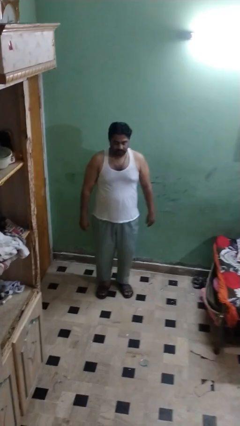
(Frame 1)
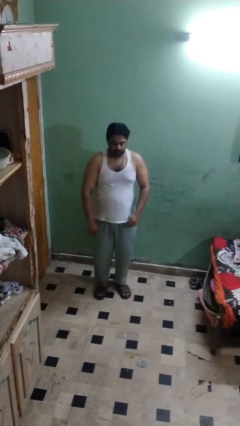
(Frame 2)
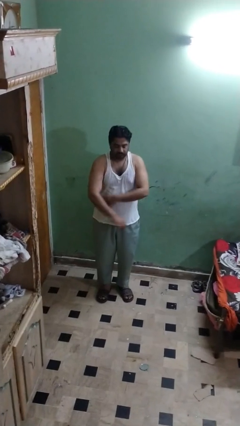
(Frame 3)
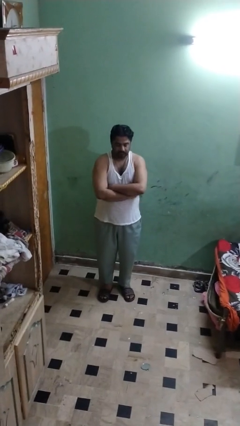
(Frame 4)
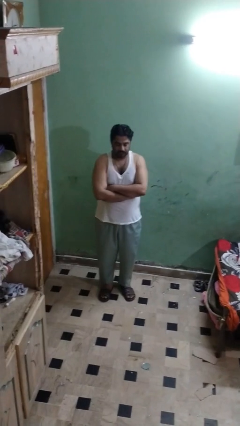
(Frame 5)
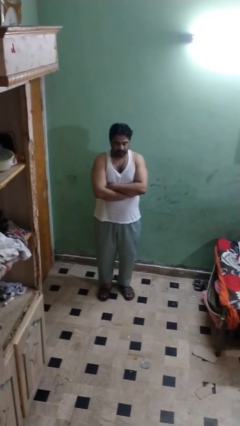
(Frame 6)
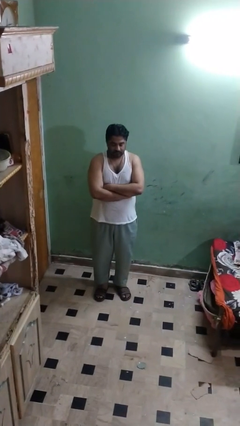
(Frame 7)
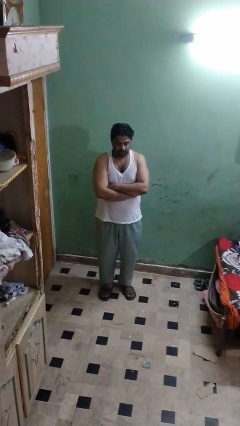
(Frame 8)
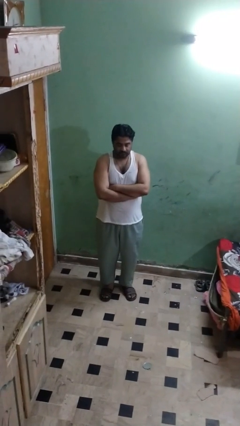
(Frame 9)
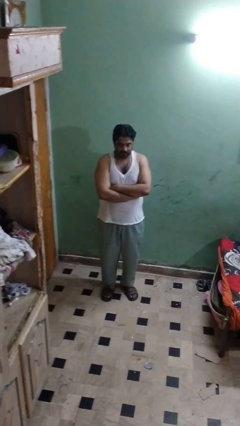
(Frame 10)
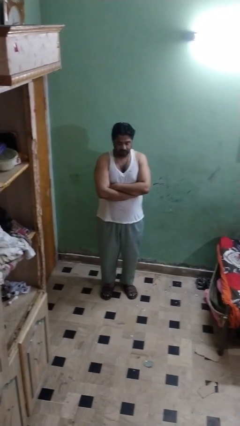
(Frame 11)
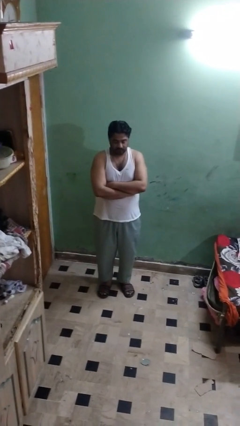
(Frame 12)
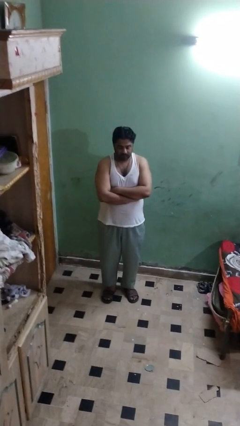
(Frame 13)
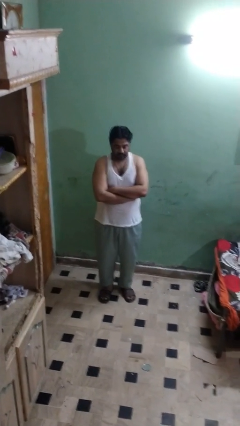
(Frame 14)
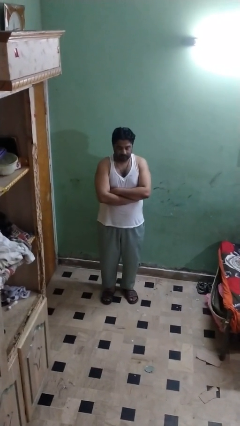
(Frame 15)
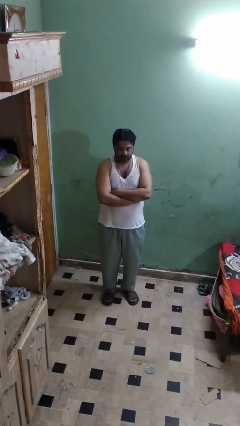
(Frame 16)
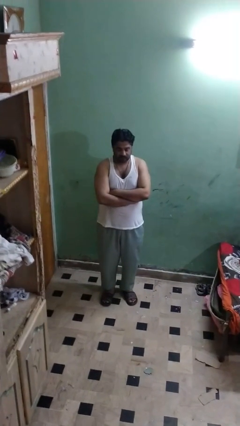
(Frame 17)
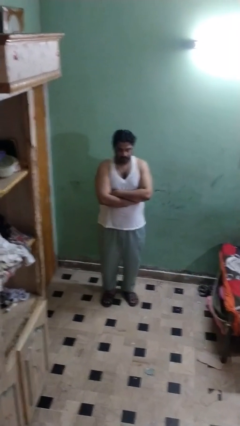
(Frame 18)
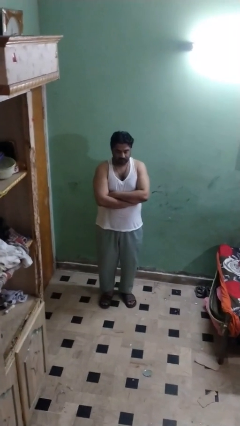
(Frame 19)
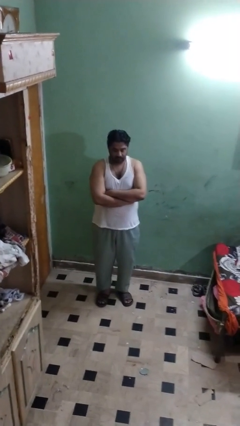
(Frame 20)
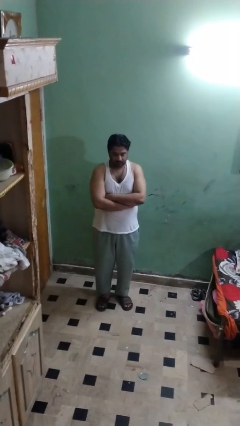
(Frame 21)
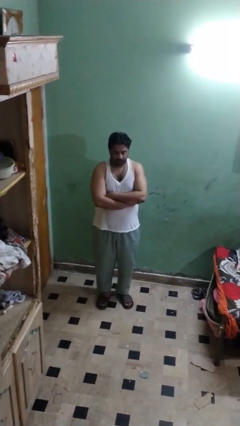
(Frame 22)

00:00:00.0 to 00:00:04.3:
person crosses arms

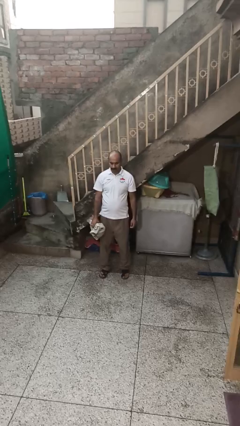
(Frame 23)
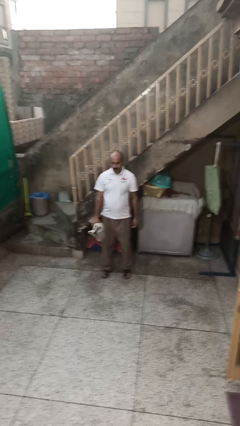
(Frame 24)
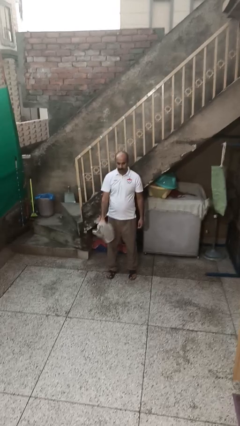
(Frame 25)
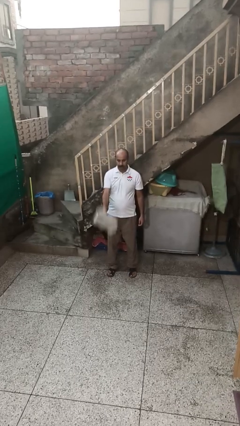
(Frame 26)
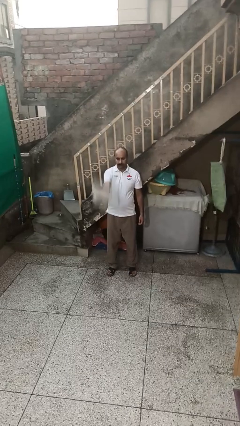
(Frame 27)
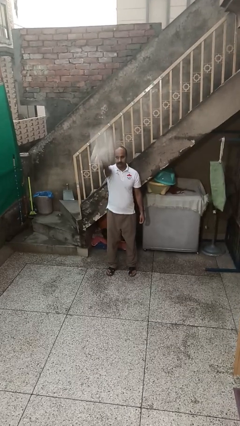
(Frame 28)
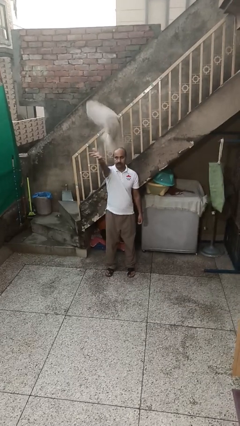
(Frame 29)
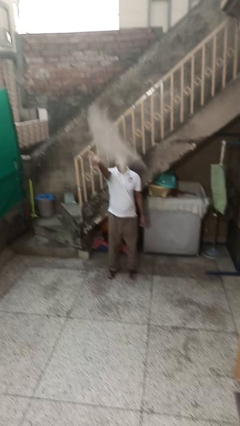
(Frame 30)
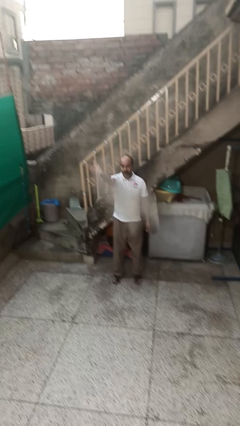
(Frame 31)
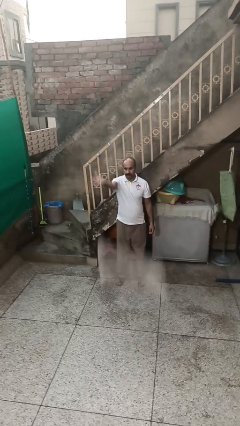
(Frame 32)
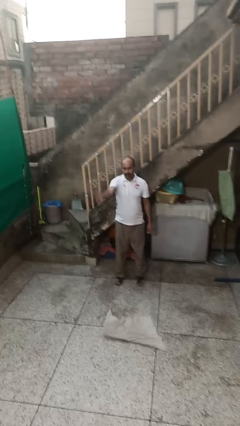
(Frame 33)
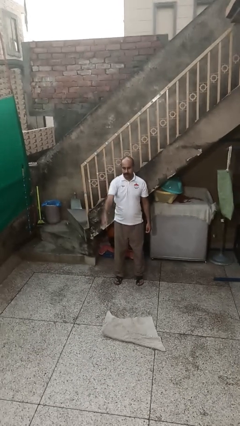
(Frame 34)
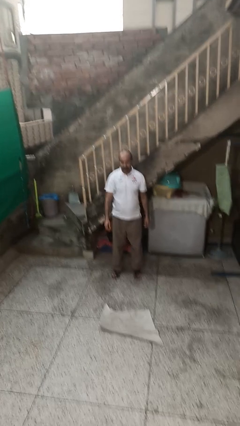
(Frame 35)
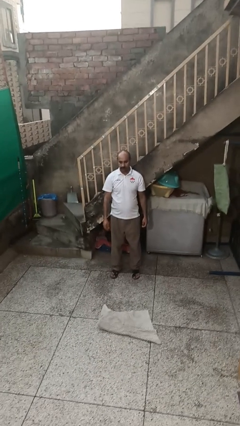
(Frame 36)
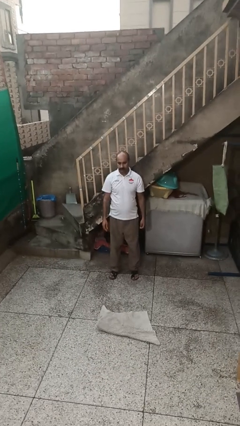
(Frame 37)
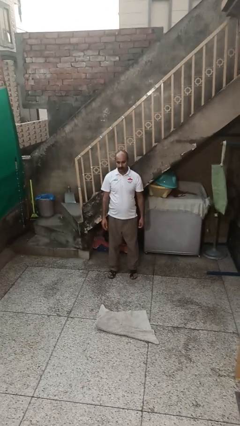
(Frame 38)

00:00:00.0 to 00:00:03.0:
person throws object into air

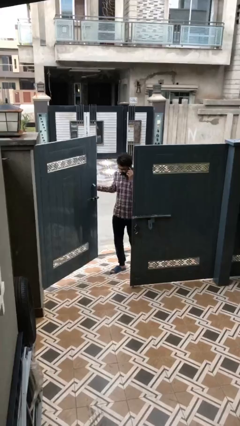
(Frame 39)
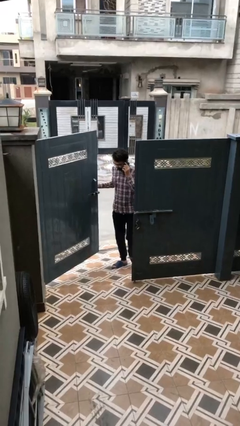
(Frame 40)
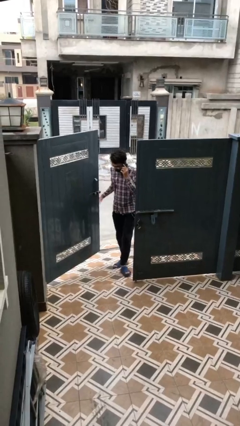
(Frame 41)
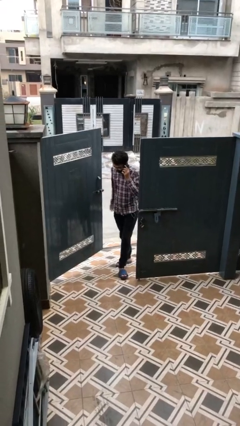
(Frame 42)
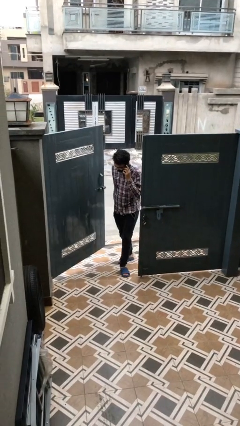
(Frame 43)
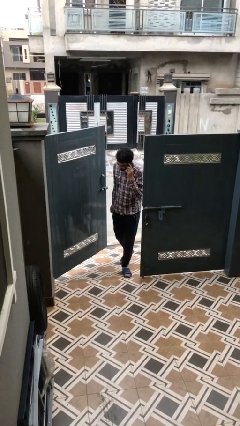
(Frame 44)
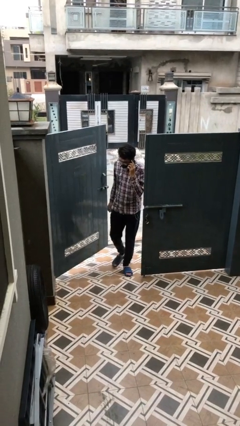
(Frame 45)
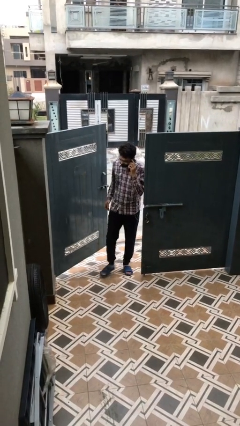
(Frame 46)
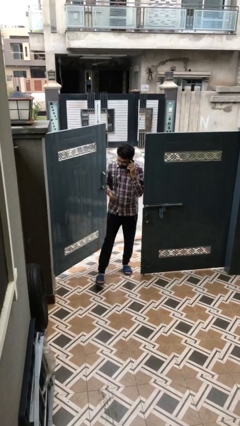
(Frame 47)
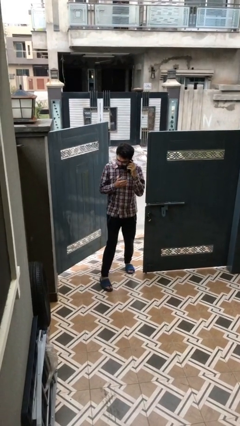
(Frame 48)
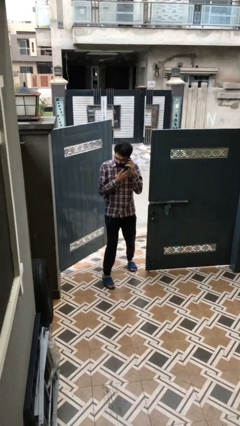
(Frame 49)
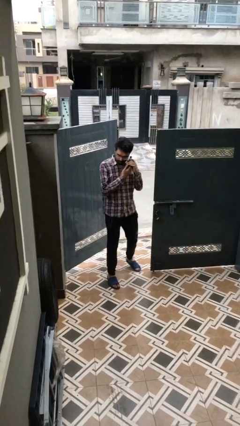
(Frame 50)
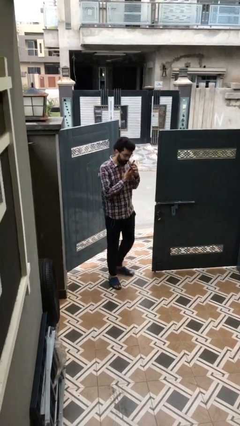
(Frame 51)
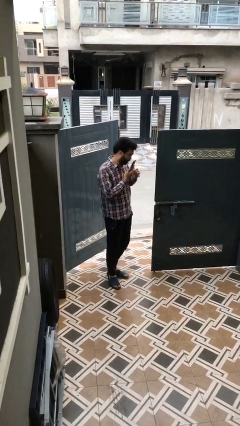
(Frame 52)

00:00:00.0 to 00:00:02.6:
person enters scene through structure

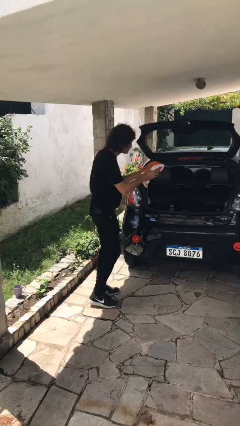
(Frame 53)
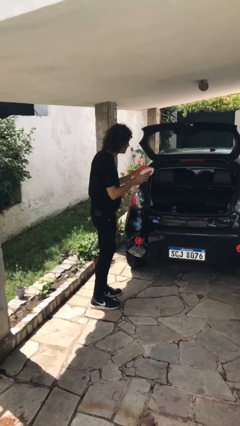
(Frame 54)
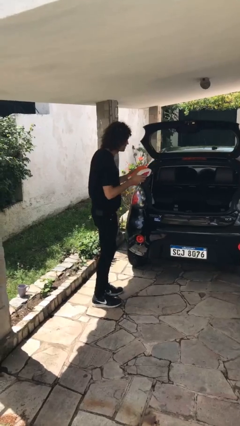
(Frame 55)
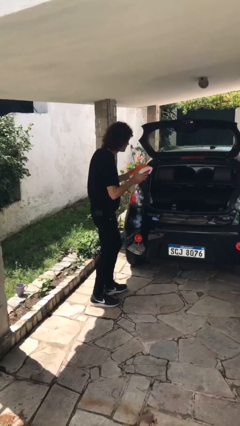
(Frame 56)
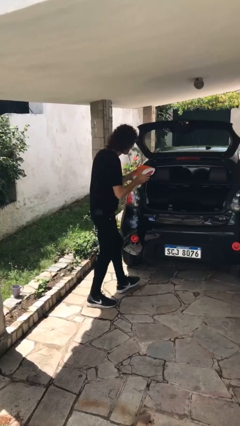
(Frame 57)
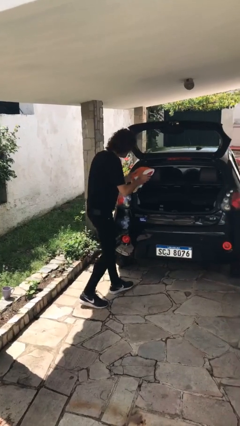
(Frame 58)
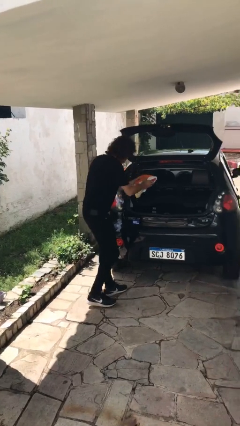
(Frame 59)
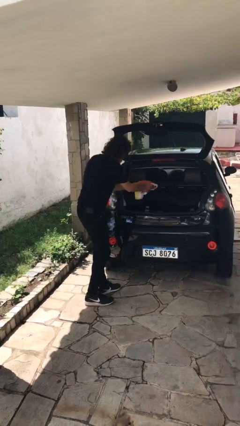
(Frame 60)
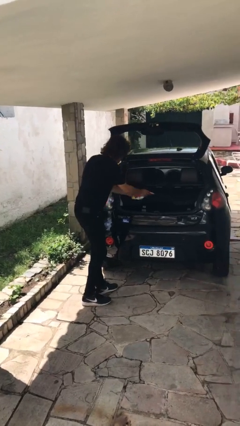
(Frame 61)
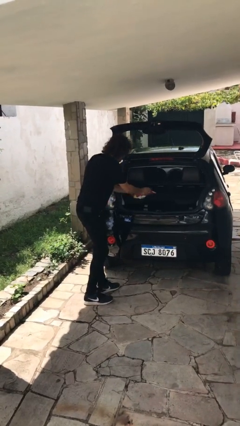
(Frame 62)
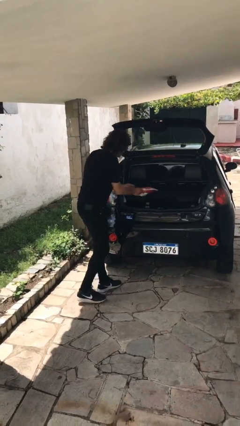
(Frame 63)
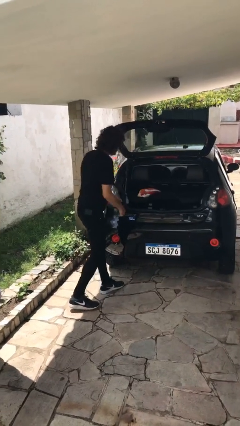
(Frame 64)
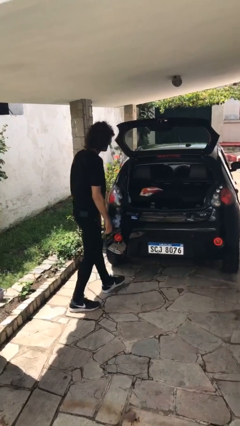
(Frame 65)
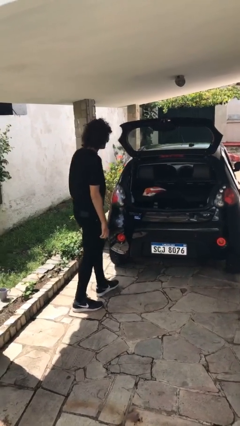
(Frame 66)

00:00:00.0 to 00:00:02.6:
person loads car

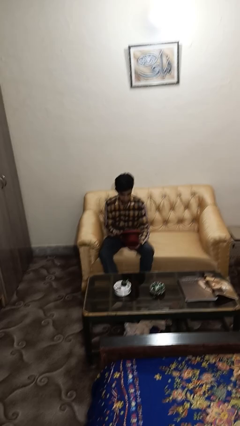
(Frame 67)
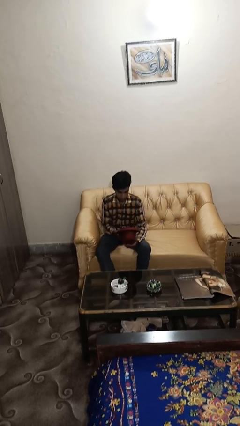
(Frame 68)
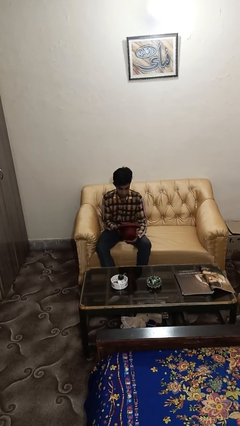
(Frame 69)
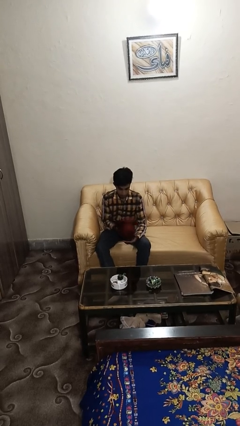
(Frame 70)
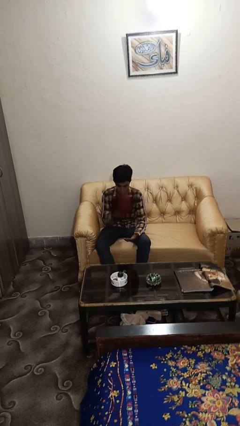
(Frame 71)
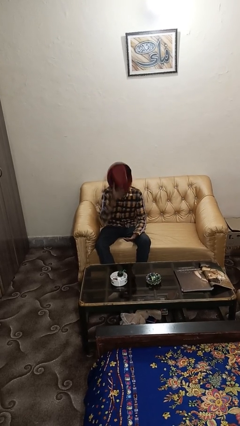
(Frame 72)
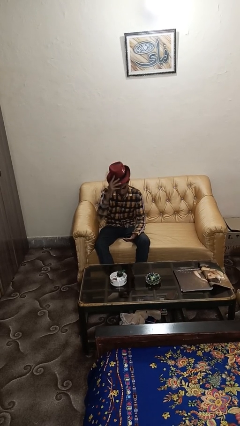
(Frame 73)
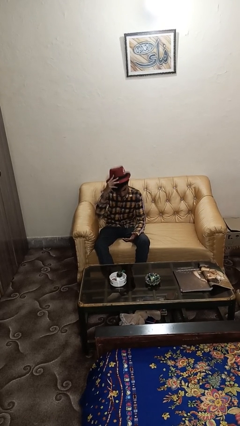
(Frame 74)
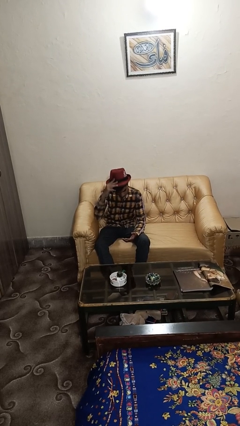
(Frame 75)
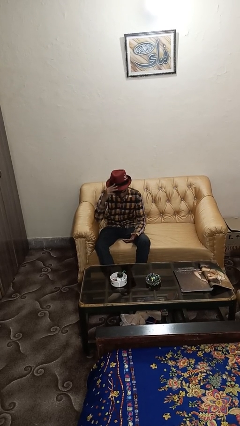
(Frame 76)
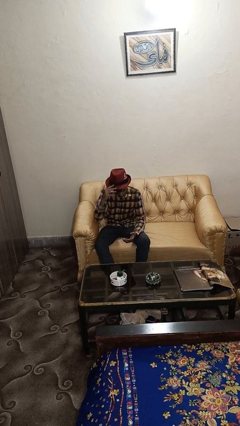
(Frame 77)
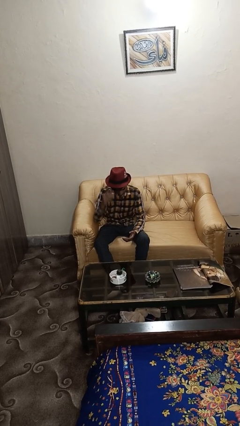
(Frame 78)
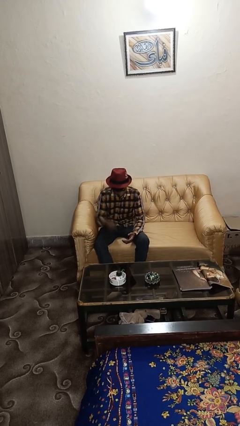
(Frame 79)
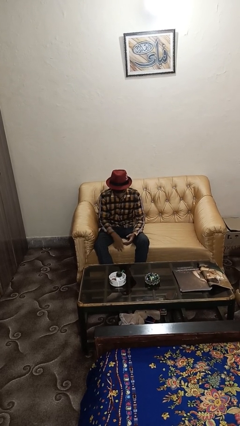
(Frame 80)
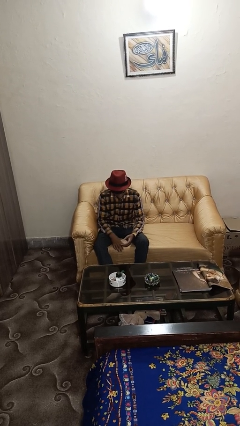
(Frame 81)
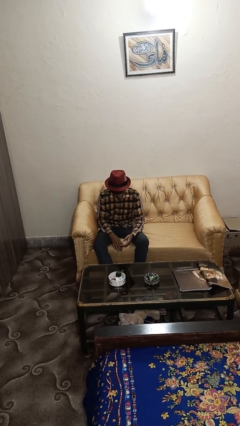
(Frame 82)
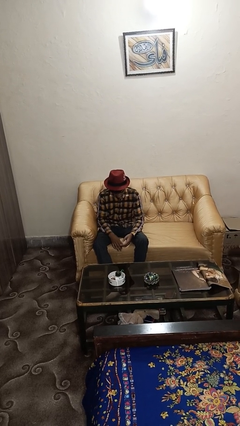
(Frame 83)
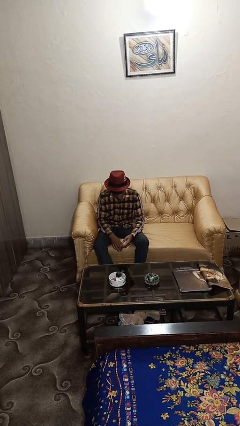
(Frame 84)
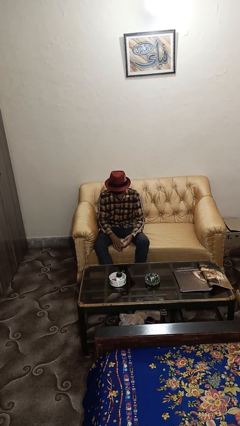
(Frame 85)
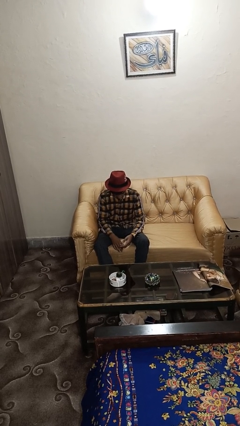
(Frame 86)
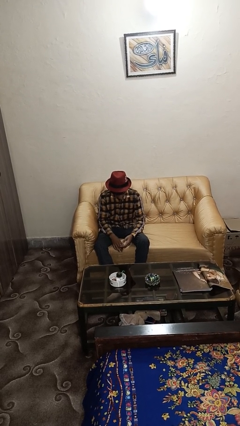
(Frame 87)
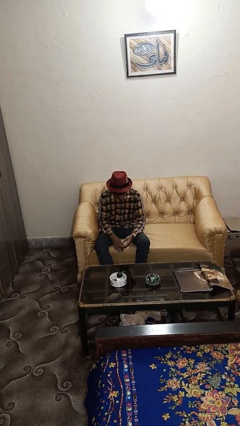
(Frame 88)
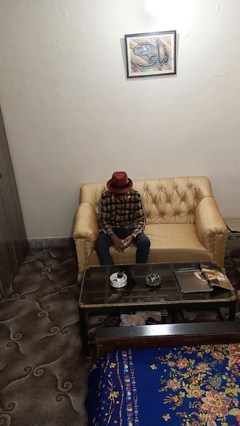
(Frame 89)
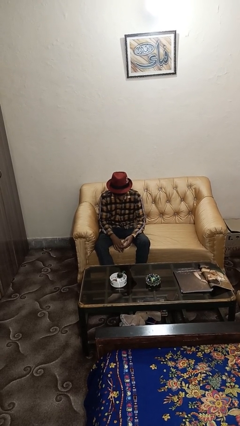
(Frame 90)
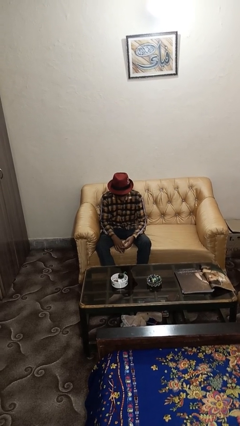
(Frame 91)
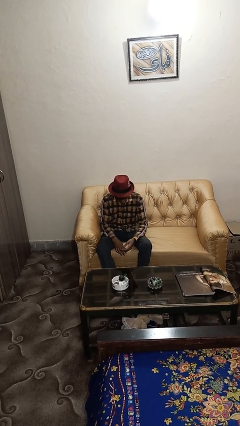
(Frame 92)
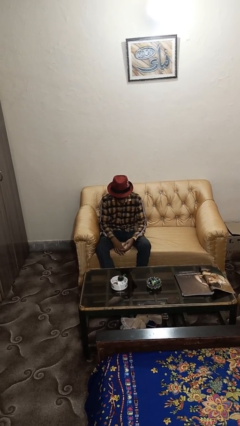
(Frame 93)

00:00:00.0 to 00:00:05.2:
person puts on hat
